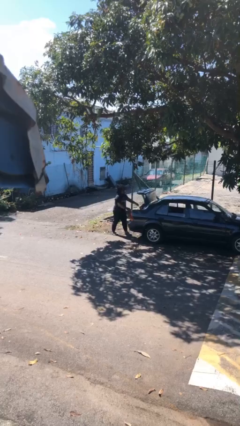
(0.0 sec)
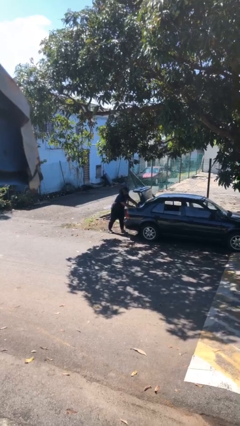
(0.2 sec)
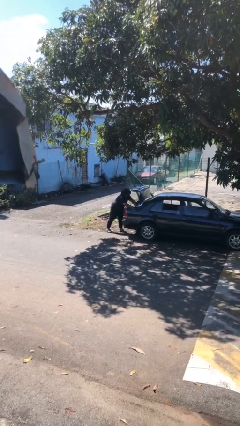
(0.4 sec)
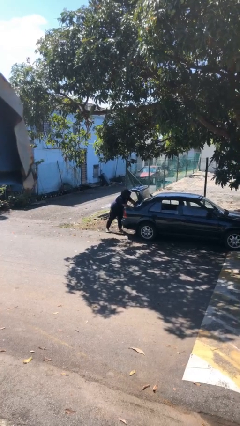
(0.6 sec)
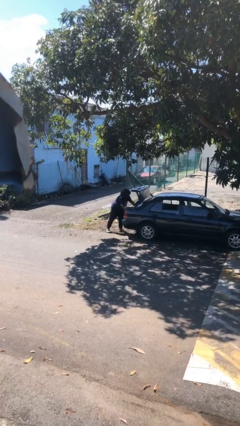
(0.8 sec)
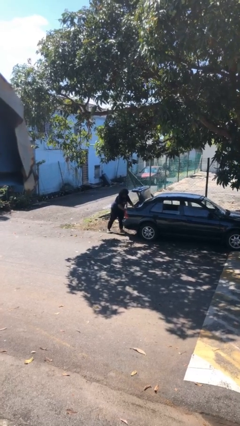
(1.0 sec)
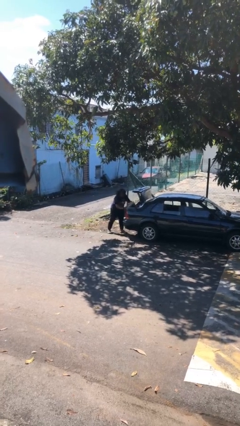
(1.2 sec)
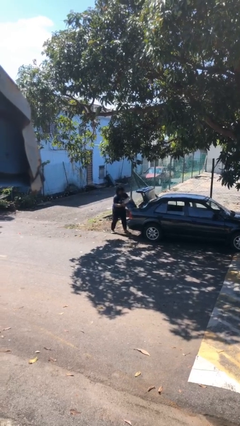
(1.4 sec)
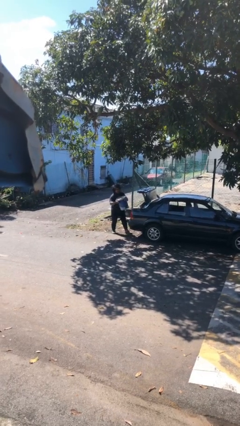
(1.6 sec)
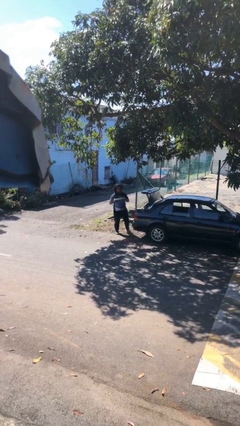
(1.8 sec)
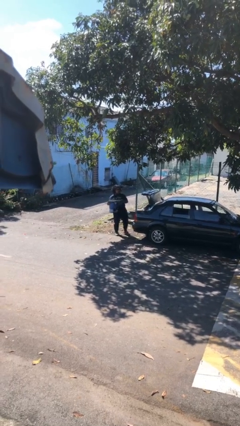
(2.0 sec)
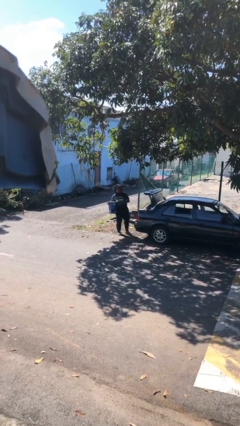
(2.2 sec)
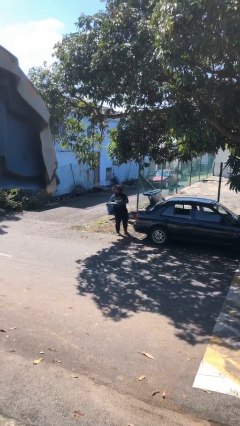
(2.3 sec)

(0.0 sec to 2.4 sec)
person unloads car

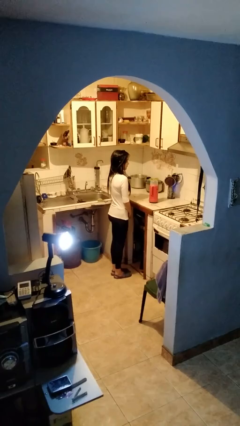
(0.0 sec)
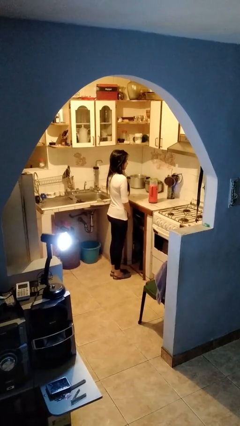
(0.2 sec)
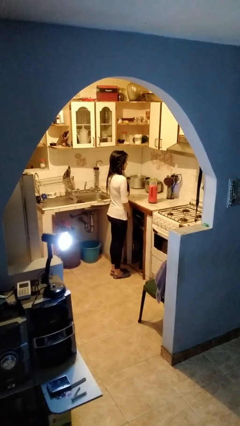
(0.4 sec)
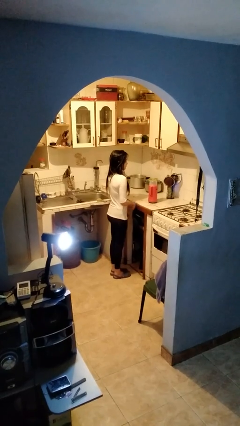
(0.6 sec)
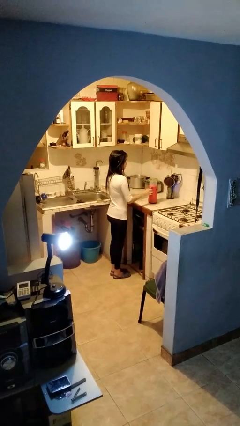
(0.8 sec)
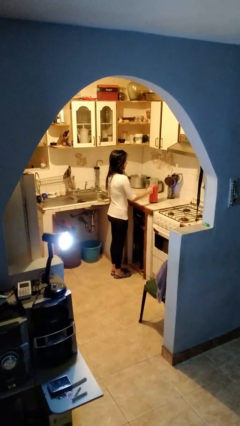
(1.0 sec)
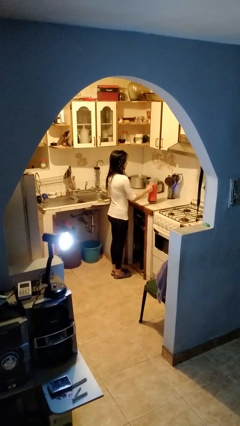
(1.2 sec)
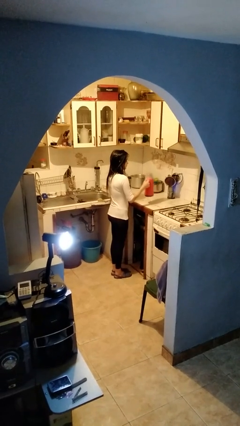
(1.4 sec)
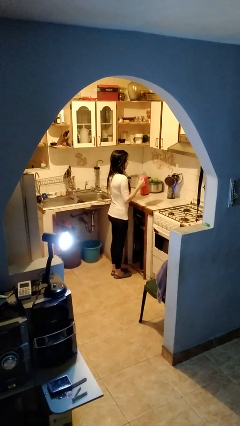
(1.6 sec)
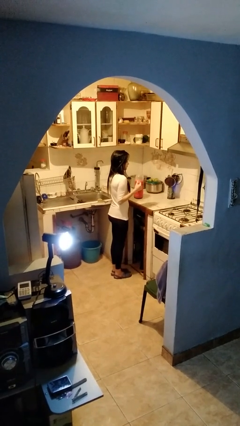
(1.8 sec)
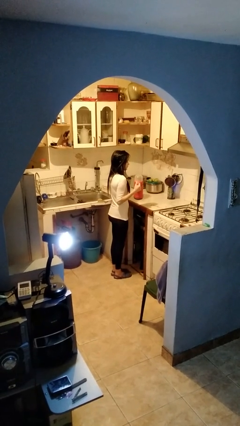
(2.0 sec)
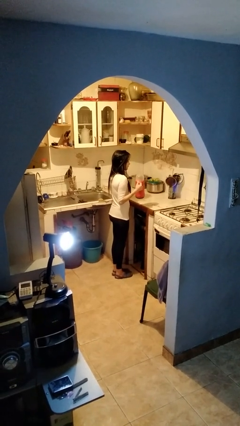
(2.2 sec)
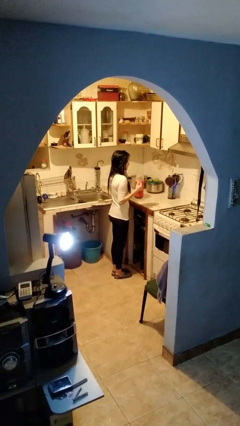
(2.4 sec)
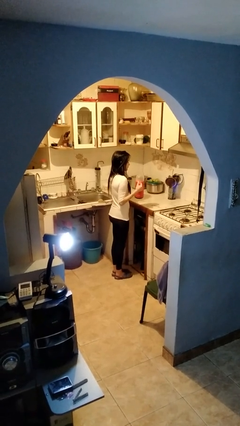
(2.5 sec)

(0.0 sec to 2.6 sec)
person picks up object from countertop

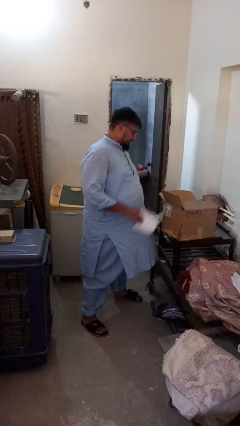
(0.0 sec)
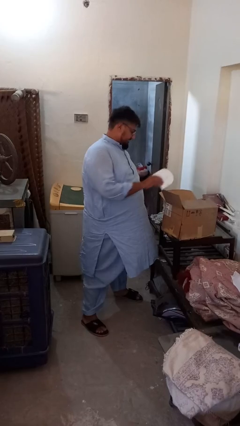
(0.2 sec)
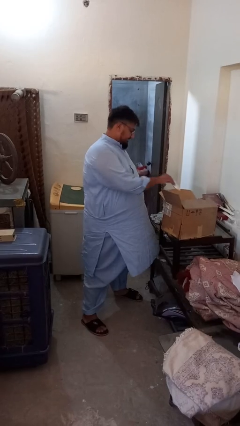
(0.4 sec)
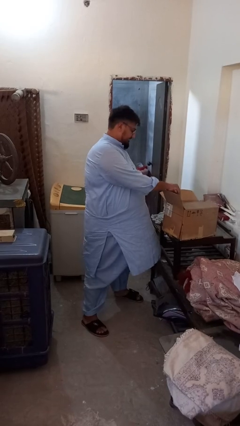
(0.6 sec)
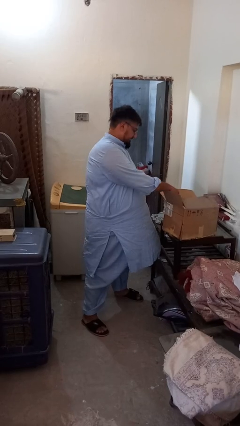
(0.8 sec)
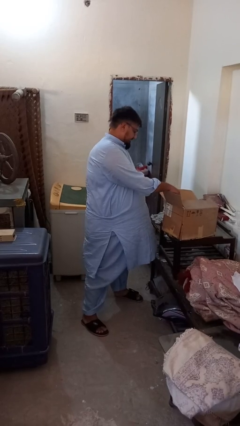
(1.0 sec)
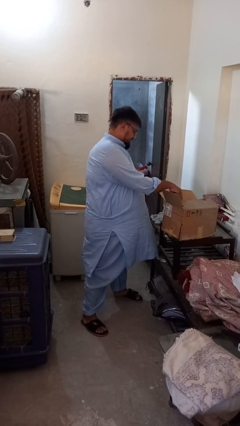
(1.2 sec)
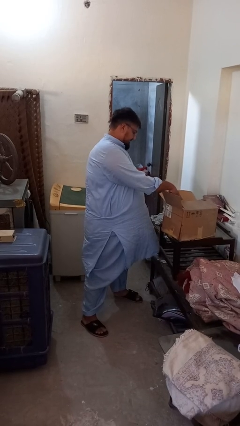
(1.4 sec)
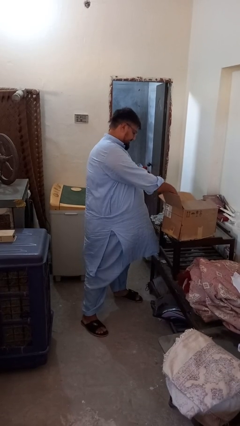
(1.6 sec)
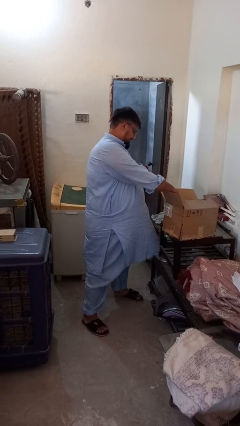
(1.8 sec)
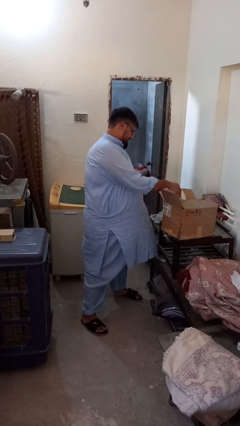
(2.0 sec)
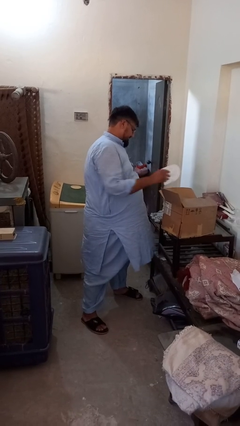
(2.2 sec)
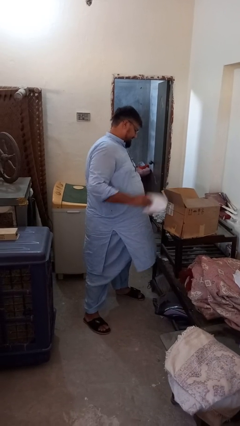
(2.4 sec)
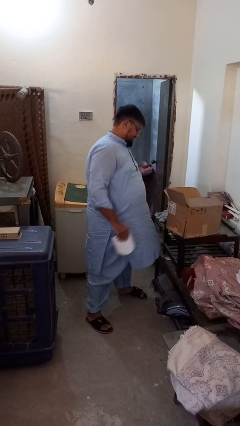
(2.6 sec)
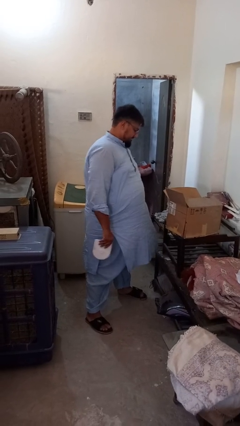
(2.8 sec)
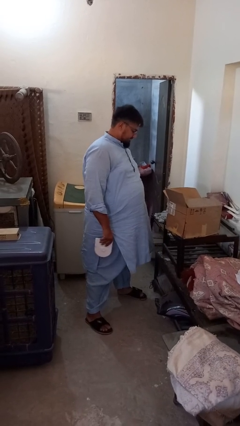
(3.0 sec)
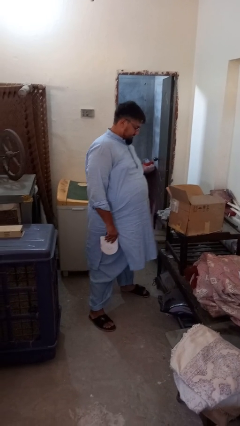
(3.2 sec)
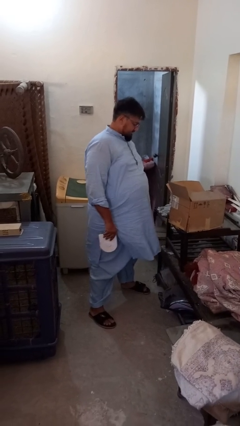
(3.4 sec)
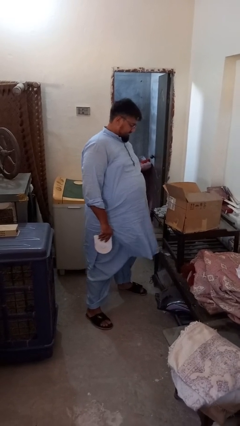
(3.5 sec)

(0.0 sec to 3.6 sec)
person takes object from box

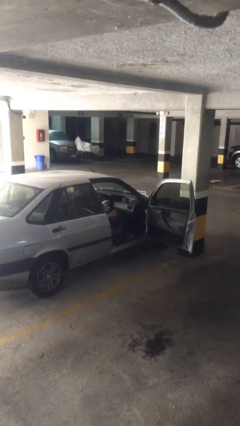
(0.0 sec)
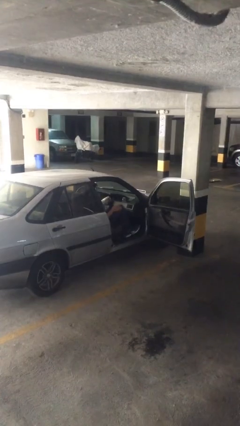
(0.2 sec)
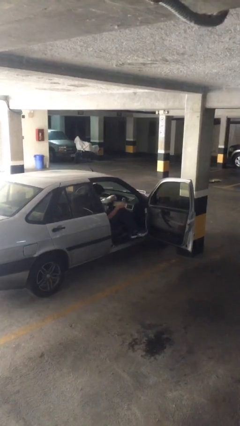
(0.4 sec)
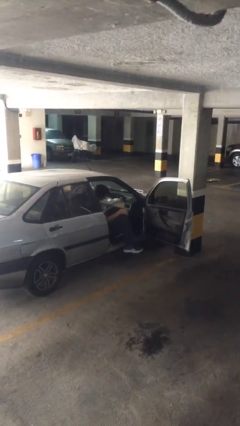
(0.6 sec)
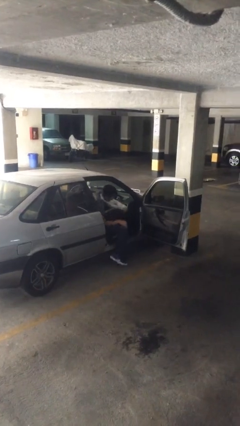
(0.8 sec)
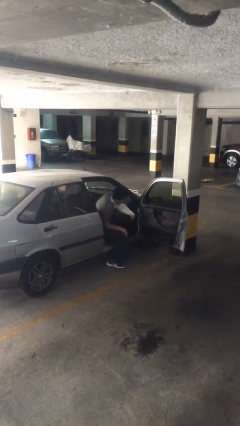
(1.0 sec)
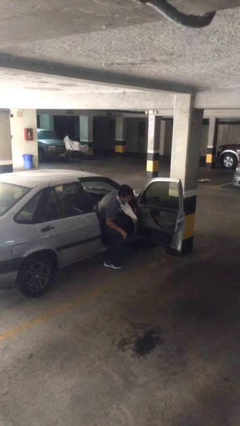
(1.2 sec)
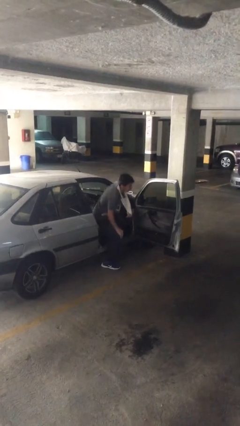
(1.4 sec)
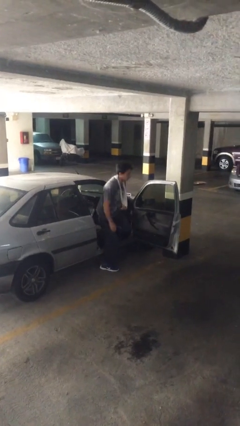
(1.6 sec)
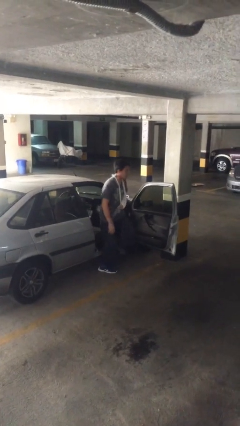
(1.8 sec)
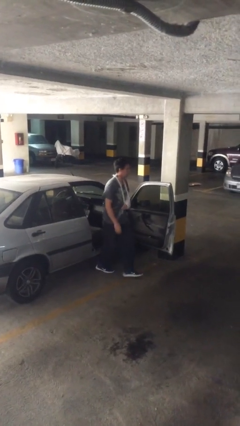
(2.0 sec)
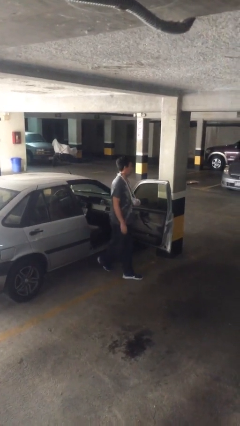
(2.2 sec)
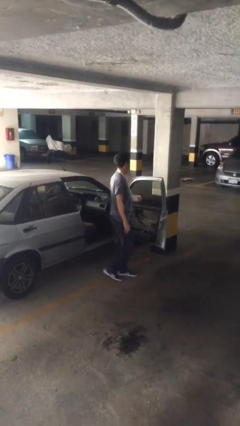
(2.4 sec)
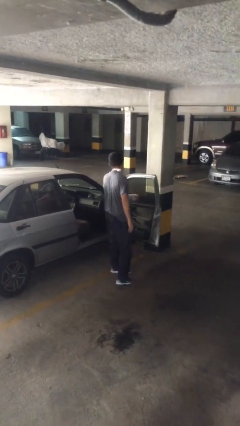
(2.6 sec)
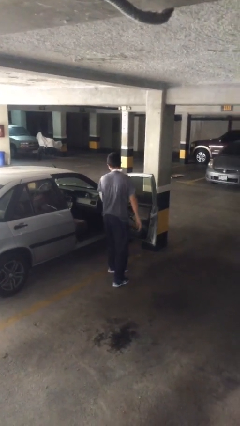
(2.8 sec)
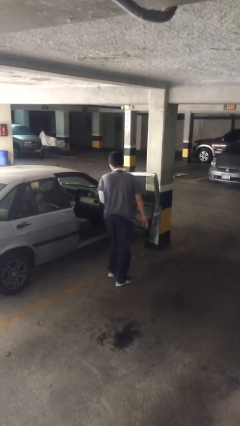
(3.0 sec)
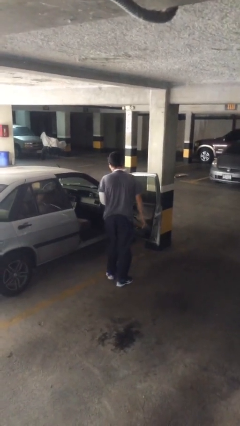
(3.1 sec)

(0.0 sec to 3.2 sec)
person exits car

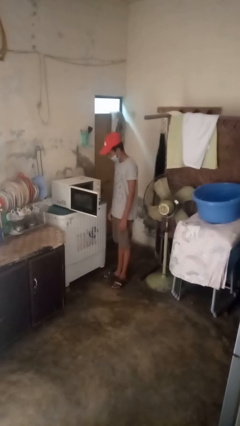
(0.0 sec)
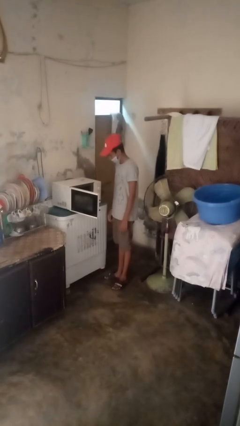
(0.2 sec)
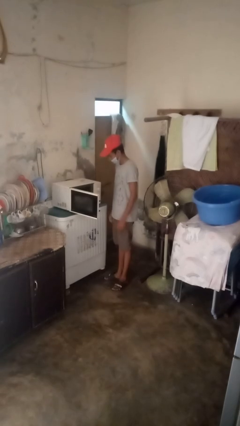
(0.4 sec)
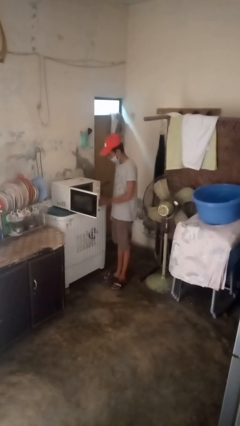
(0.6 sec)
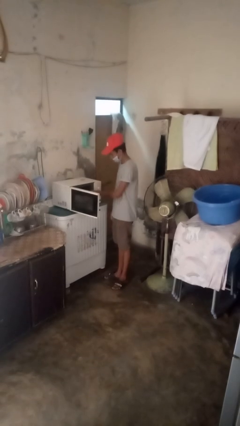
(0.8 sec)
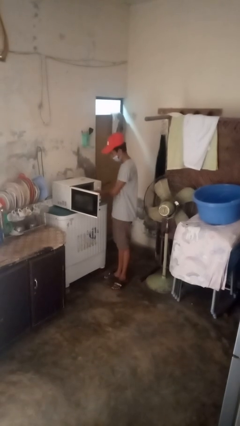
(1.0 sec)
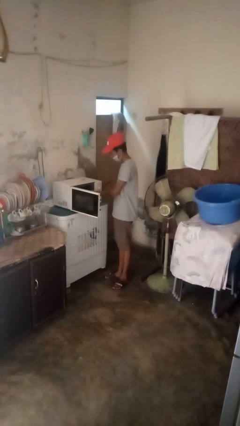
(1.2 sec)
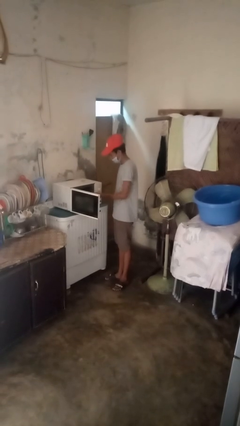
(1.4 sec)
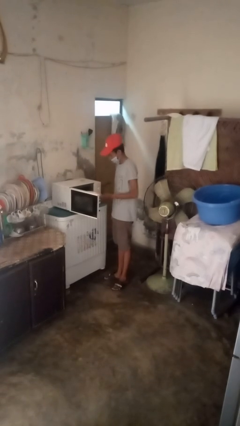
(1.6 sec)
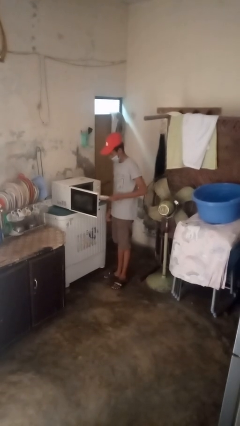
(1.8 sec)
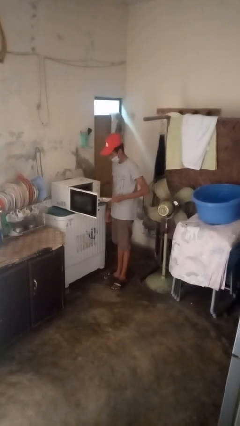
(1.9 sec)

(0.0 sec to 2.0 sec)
person takes object from microwave

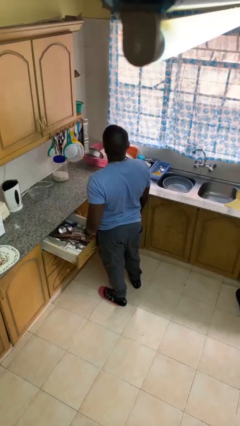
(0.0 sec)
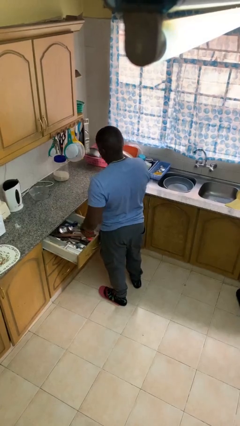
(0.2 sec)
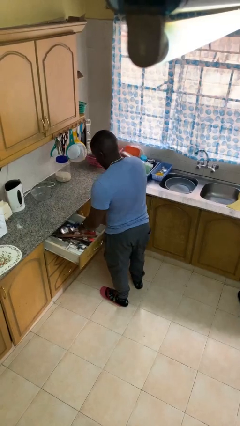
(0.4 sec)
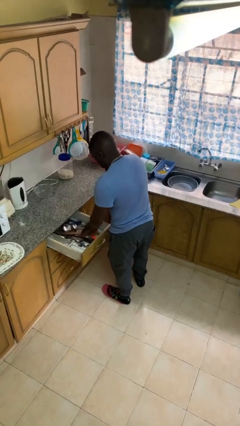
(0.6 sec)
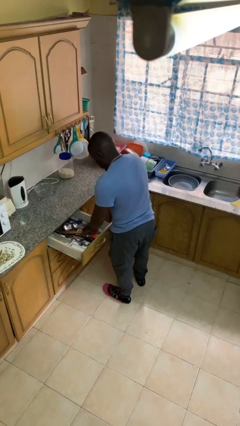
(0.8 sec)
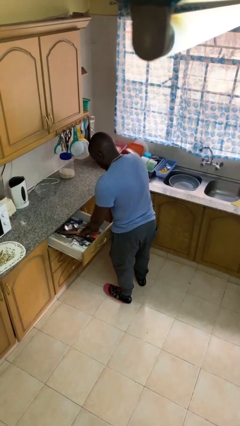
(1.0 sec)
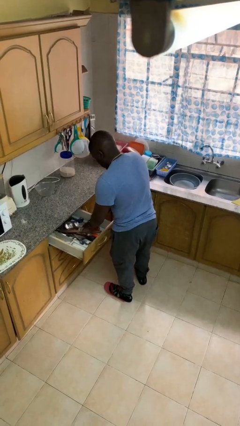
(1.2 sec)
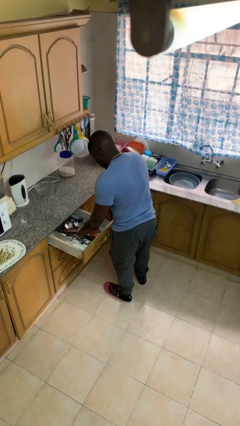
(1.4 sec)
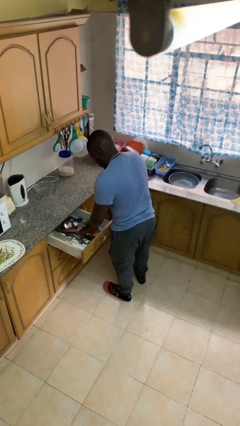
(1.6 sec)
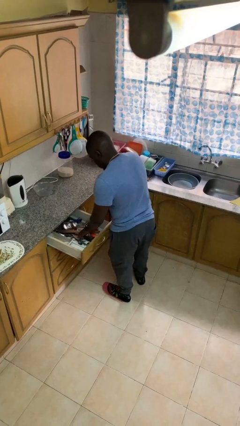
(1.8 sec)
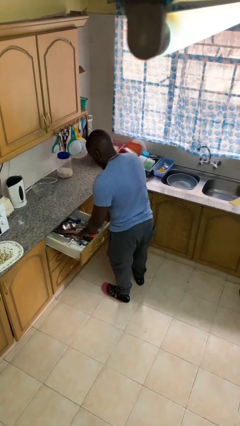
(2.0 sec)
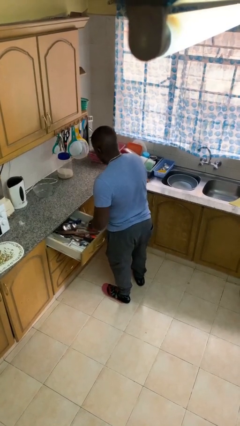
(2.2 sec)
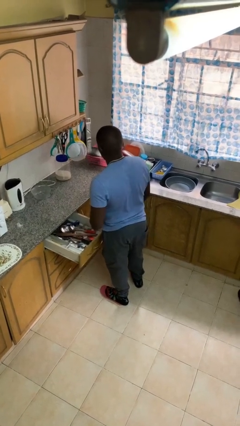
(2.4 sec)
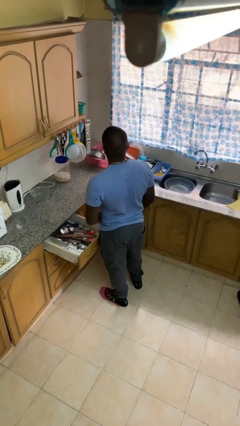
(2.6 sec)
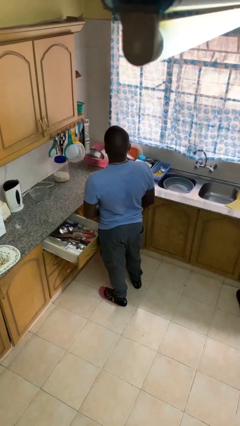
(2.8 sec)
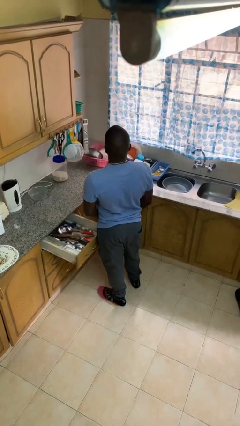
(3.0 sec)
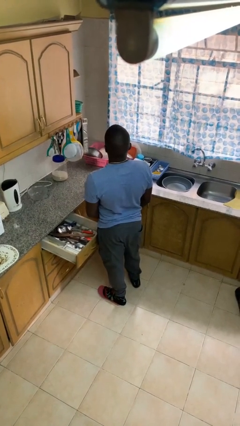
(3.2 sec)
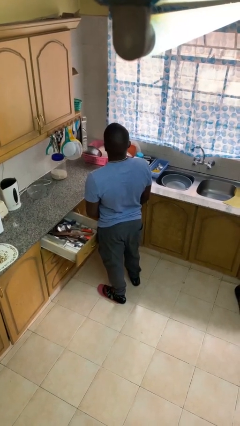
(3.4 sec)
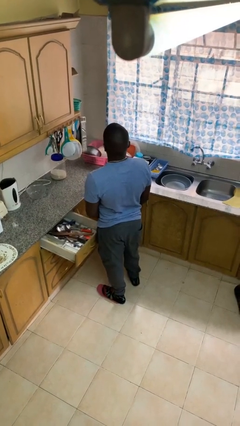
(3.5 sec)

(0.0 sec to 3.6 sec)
person searches in kitchen drawer

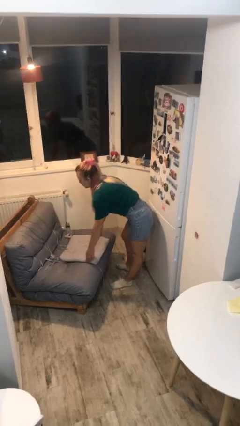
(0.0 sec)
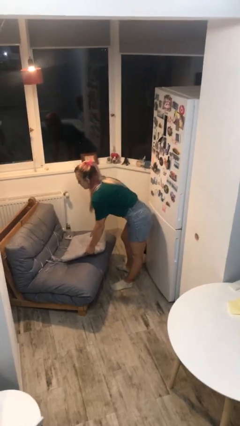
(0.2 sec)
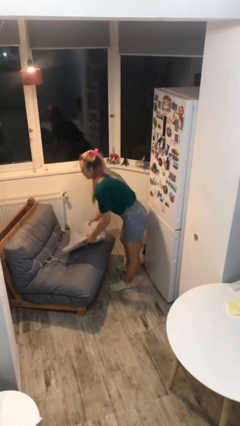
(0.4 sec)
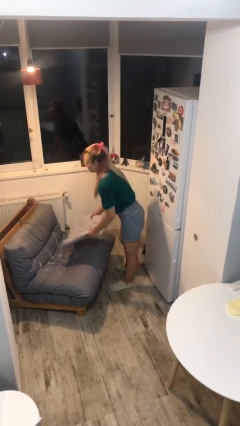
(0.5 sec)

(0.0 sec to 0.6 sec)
person picks up object from couch
